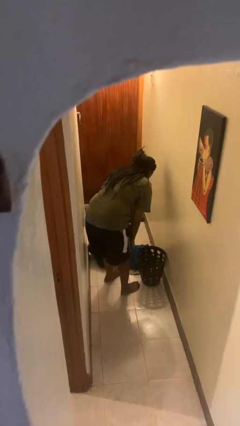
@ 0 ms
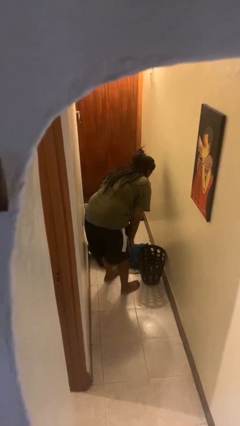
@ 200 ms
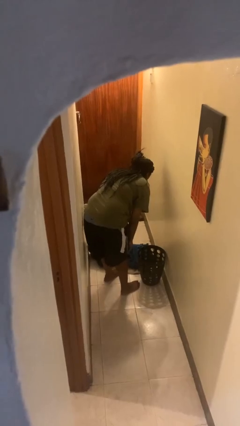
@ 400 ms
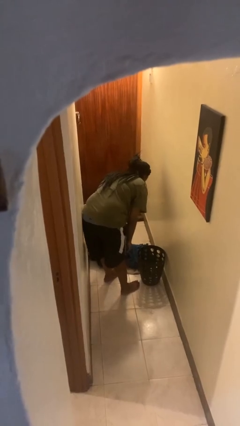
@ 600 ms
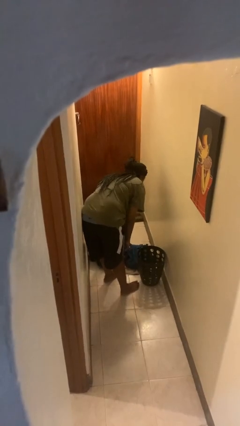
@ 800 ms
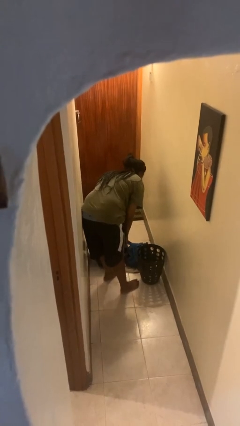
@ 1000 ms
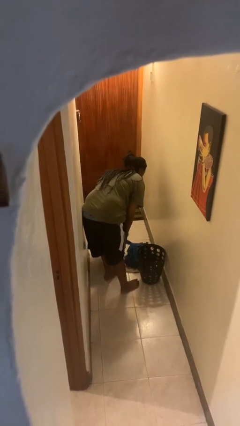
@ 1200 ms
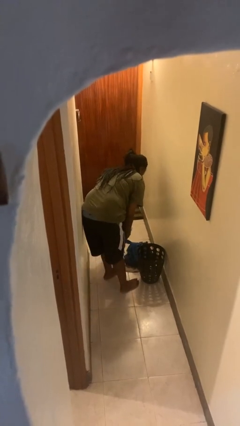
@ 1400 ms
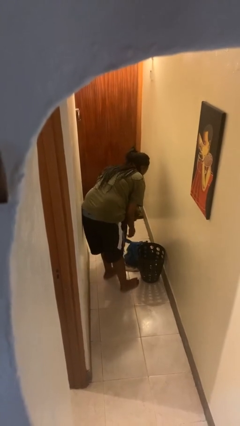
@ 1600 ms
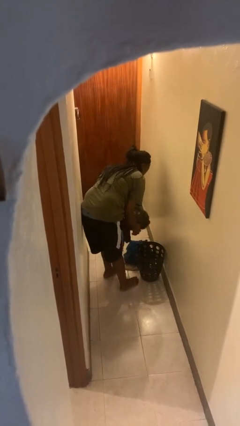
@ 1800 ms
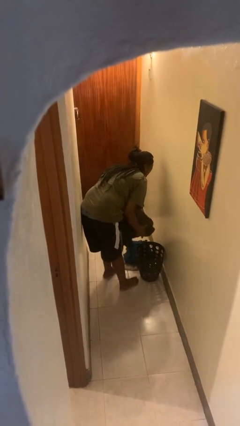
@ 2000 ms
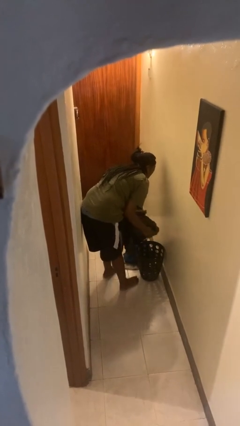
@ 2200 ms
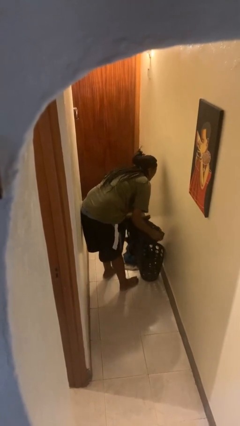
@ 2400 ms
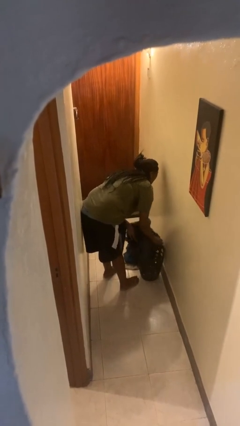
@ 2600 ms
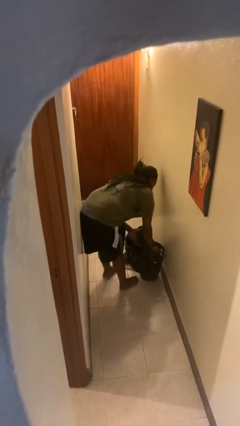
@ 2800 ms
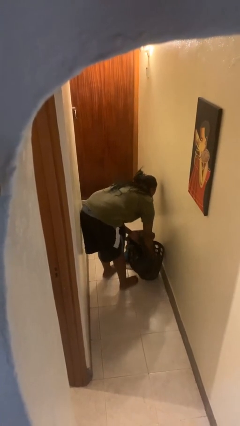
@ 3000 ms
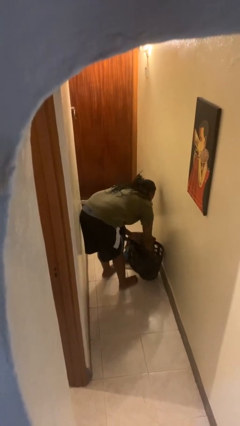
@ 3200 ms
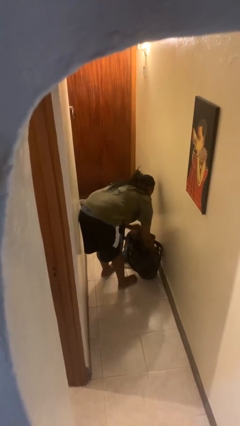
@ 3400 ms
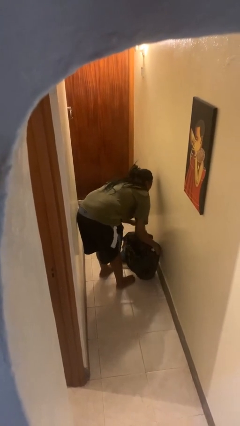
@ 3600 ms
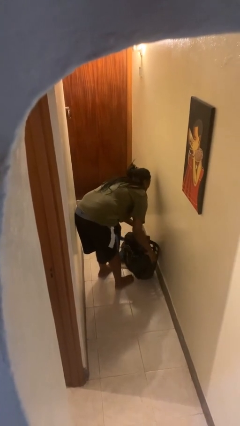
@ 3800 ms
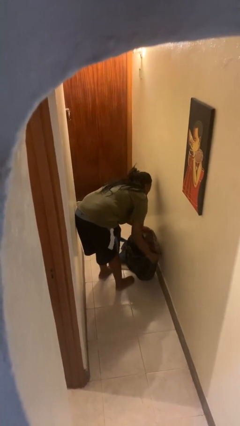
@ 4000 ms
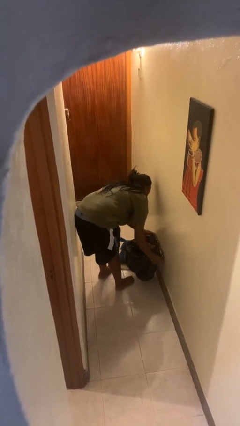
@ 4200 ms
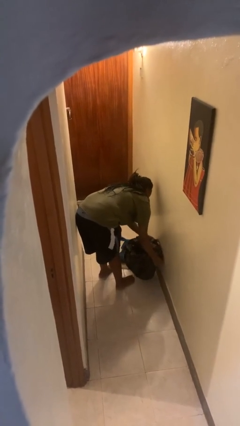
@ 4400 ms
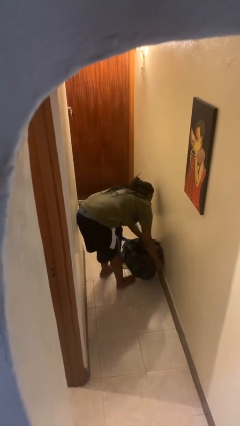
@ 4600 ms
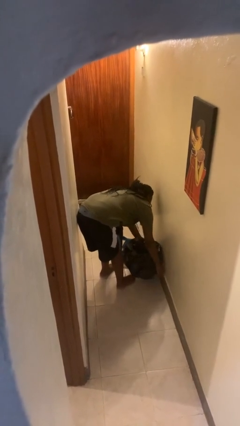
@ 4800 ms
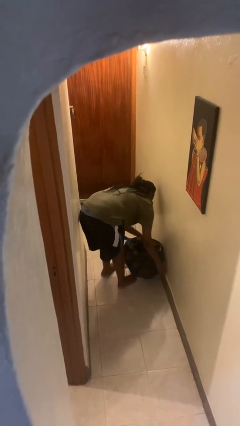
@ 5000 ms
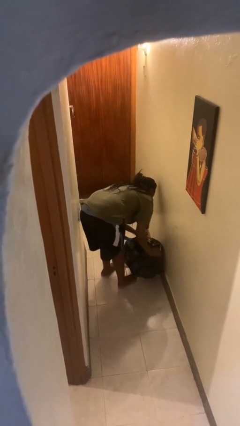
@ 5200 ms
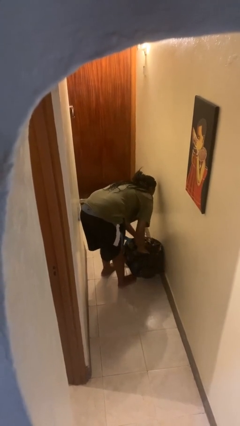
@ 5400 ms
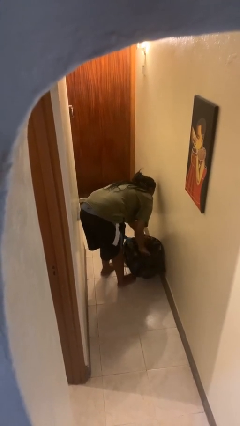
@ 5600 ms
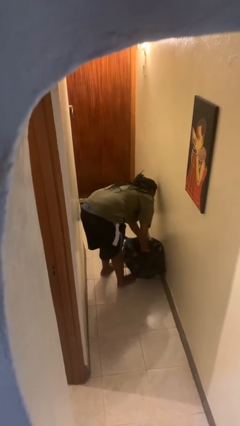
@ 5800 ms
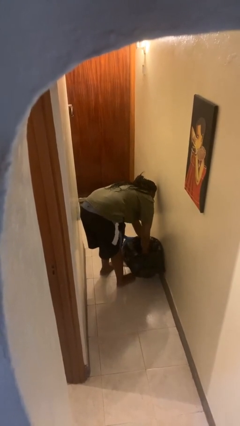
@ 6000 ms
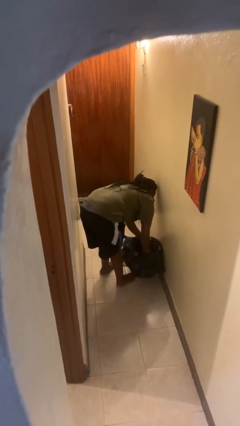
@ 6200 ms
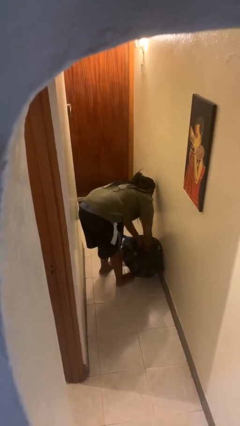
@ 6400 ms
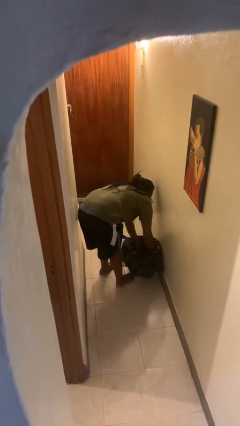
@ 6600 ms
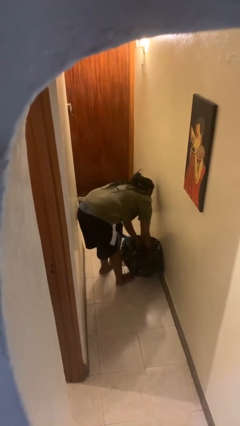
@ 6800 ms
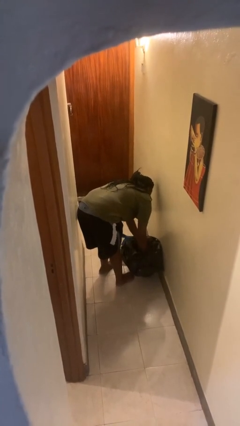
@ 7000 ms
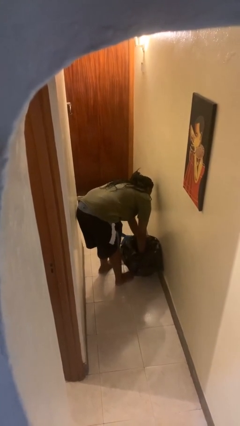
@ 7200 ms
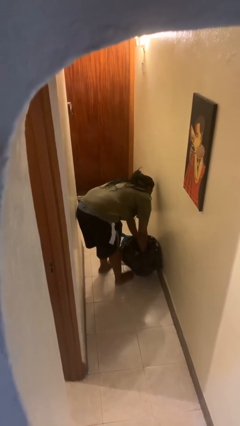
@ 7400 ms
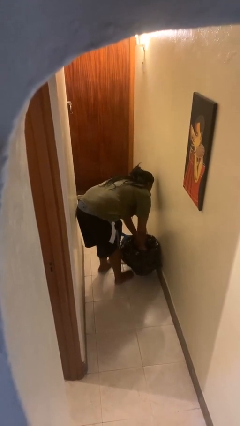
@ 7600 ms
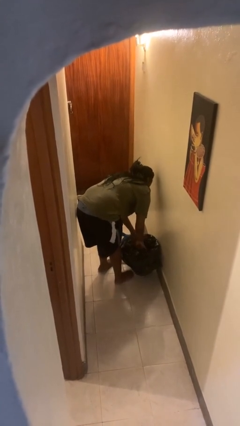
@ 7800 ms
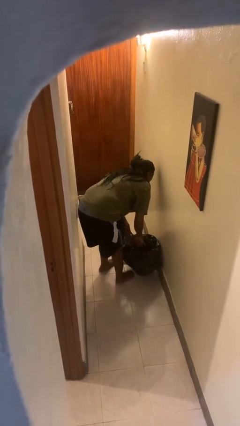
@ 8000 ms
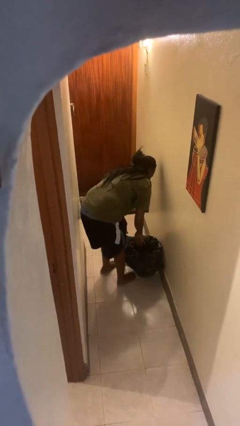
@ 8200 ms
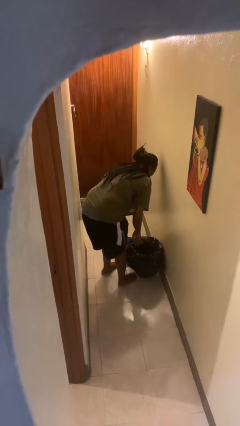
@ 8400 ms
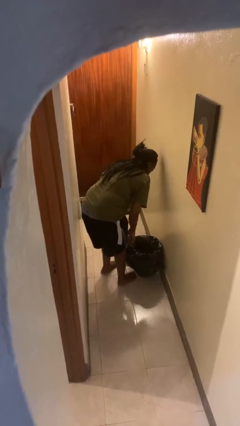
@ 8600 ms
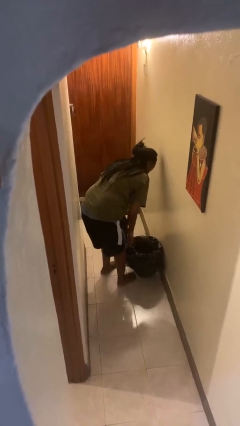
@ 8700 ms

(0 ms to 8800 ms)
person inserts trashbag into trashcan

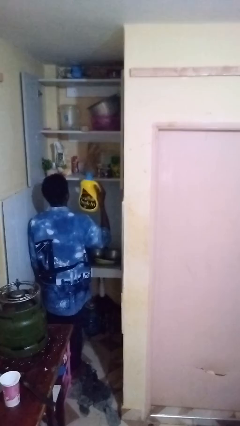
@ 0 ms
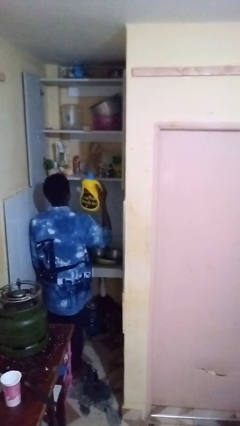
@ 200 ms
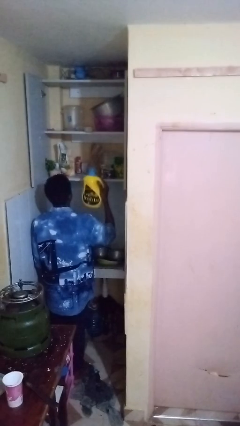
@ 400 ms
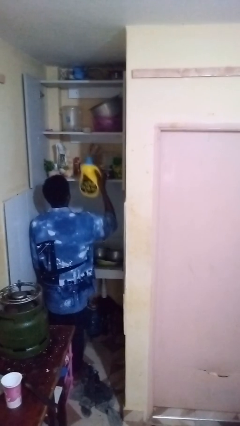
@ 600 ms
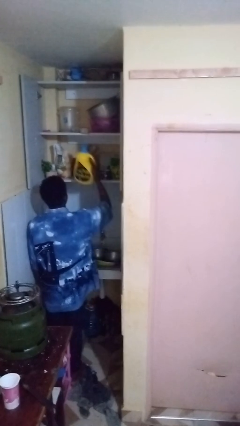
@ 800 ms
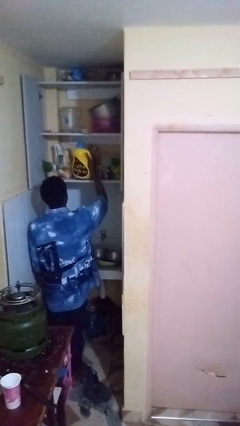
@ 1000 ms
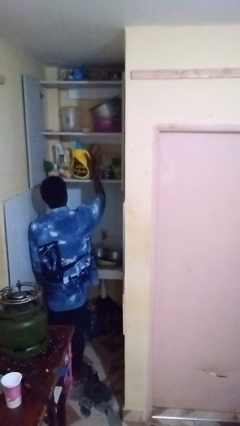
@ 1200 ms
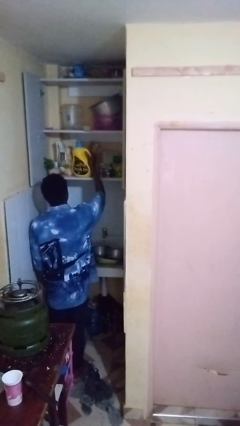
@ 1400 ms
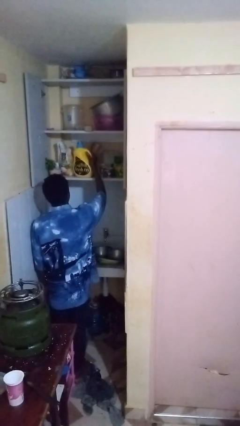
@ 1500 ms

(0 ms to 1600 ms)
person puts down object on countertop

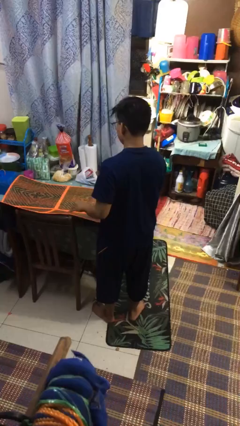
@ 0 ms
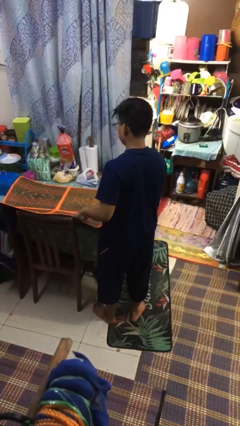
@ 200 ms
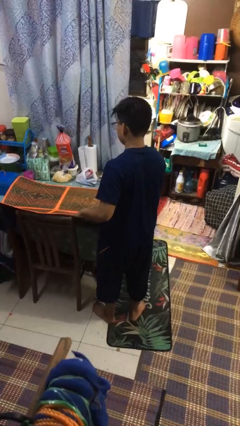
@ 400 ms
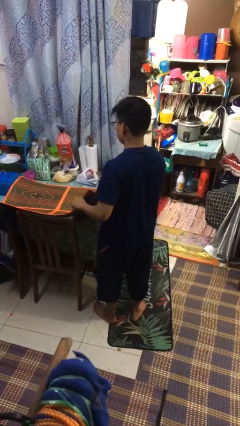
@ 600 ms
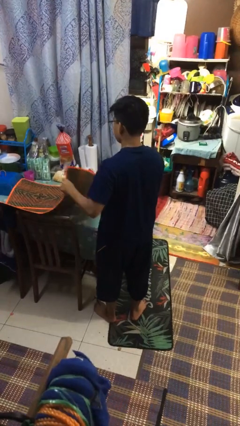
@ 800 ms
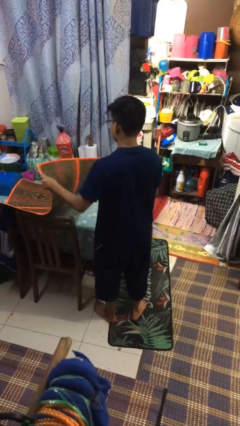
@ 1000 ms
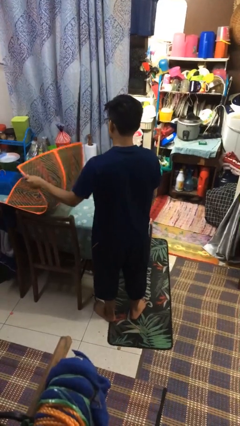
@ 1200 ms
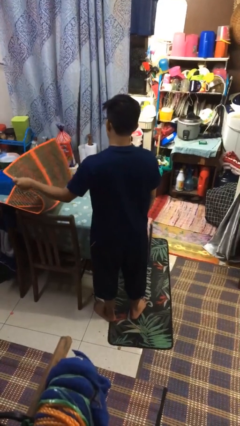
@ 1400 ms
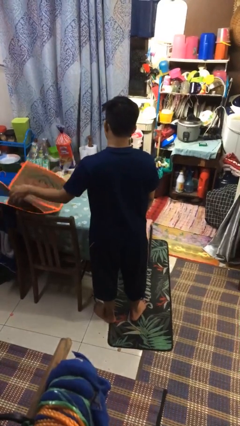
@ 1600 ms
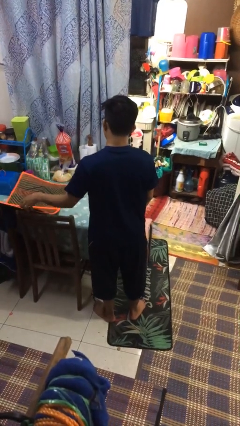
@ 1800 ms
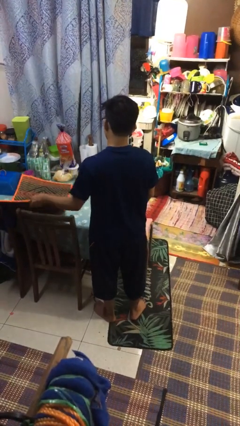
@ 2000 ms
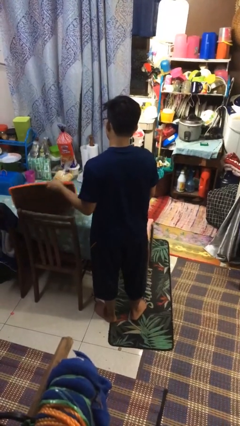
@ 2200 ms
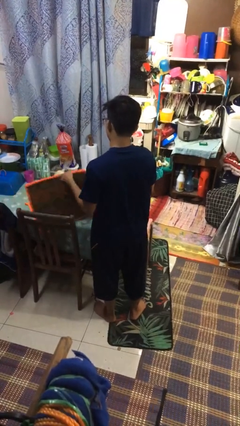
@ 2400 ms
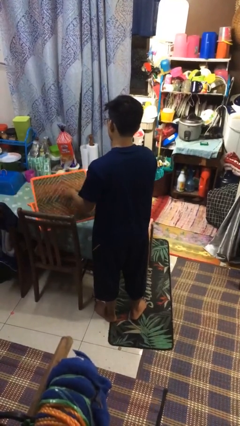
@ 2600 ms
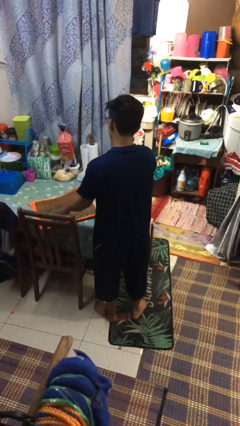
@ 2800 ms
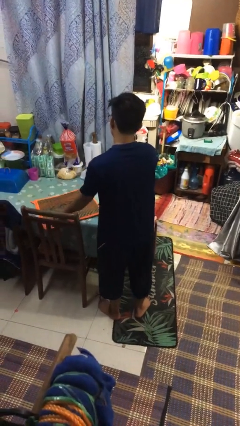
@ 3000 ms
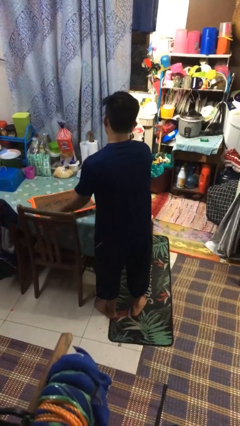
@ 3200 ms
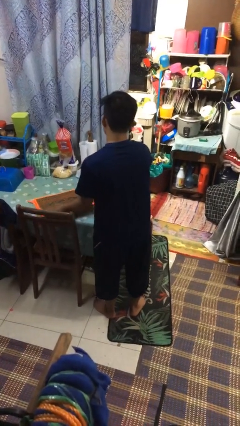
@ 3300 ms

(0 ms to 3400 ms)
person folds tablecloth

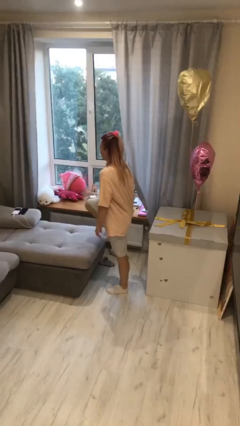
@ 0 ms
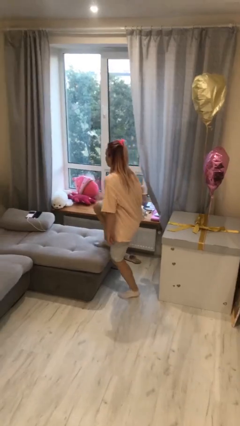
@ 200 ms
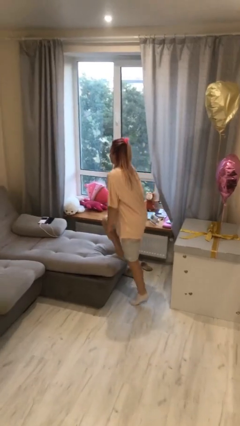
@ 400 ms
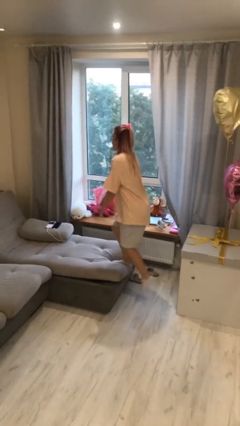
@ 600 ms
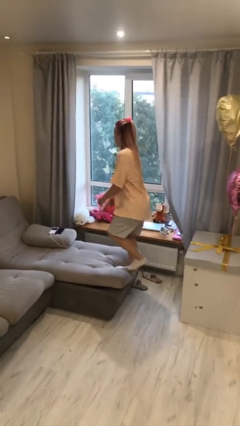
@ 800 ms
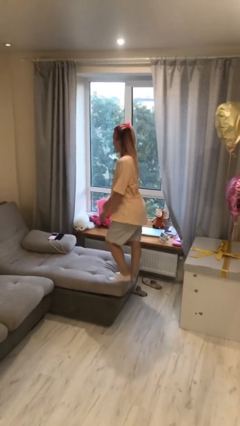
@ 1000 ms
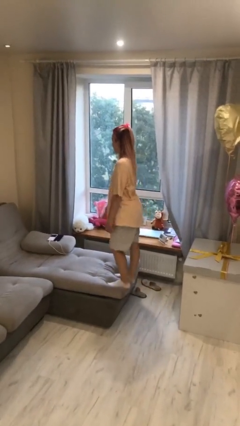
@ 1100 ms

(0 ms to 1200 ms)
person climbs on couch

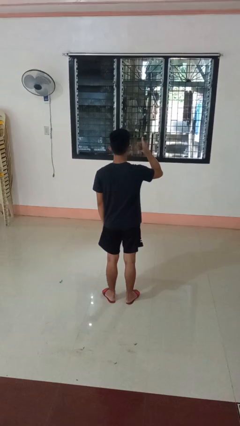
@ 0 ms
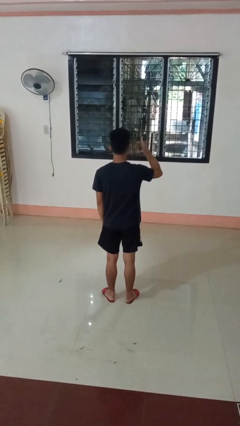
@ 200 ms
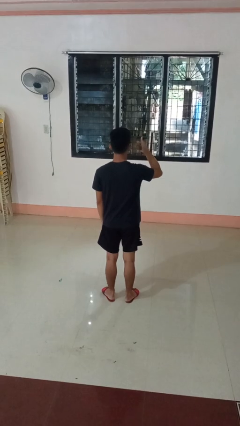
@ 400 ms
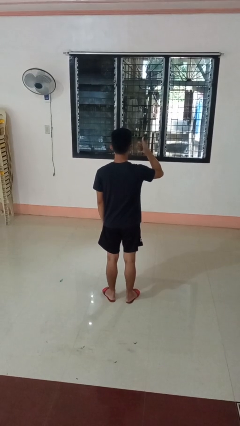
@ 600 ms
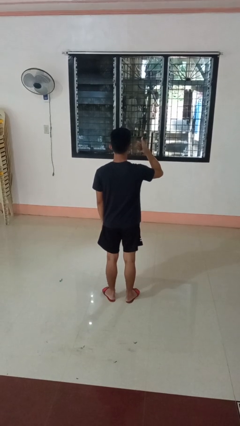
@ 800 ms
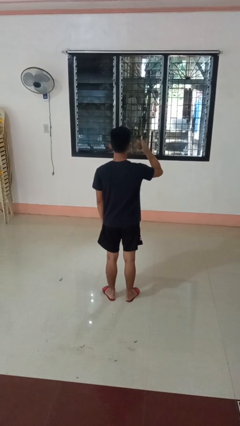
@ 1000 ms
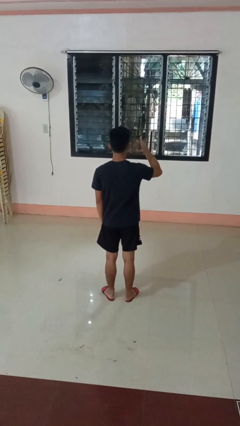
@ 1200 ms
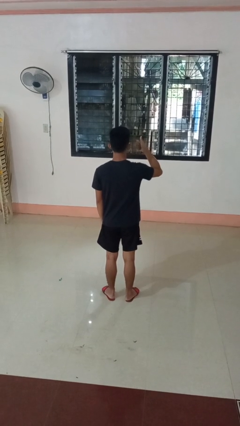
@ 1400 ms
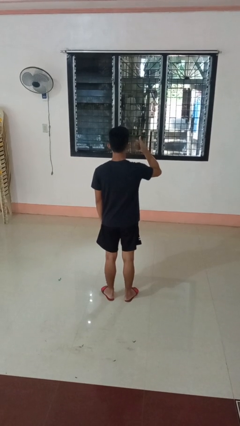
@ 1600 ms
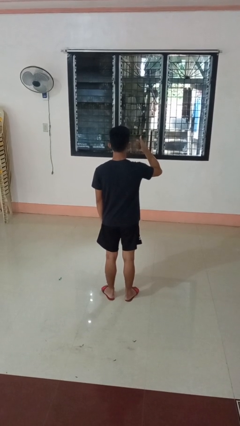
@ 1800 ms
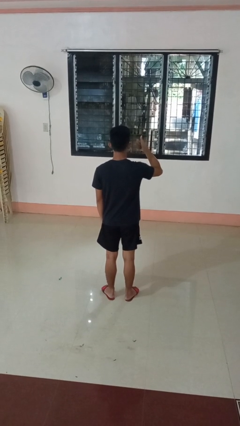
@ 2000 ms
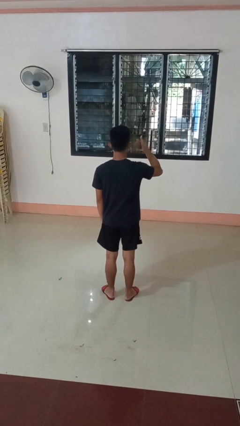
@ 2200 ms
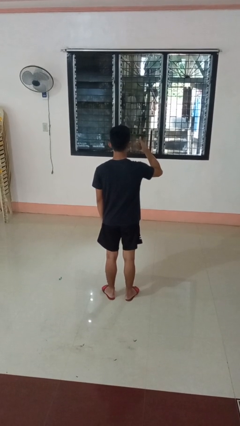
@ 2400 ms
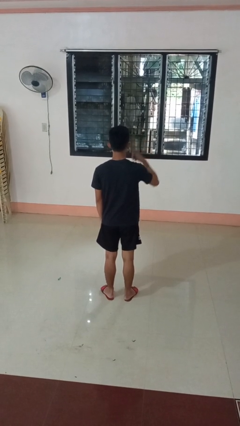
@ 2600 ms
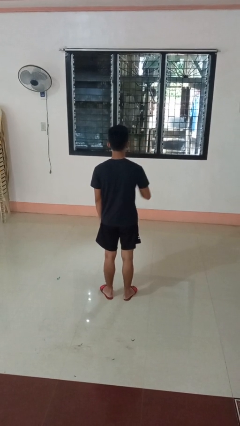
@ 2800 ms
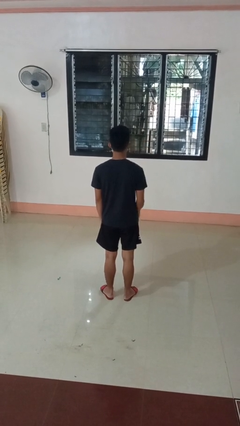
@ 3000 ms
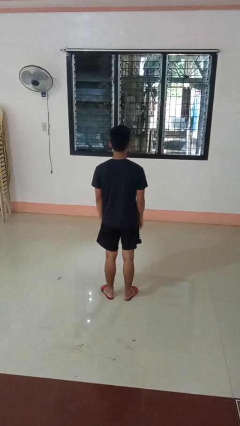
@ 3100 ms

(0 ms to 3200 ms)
person gestures thumbs up
